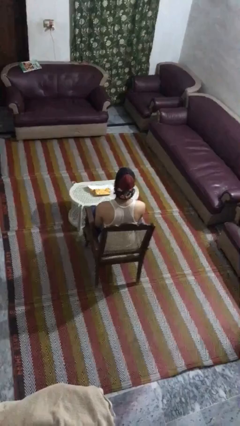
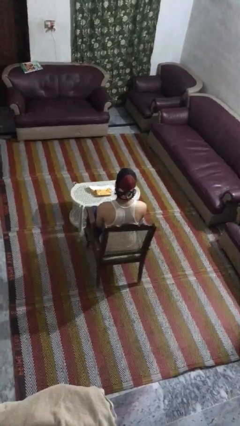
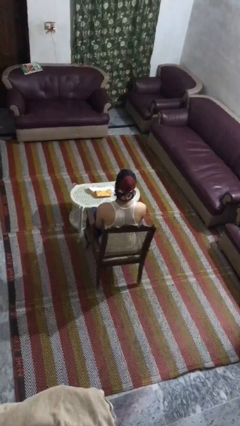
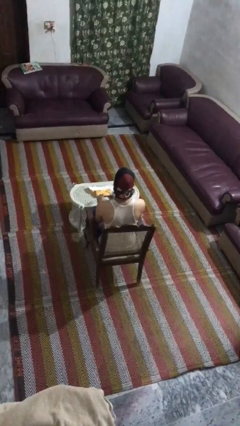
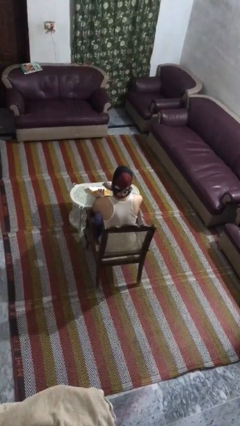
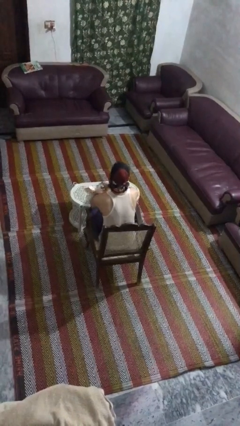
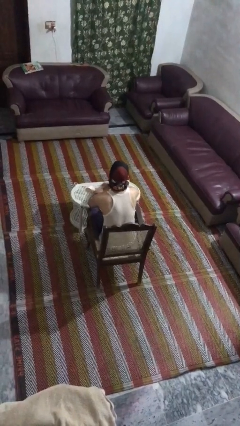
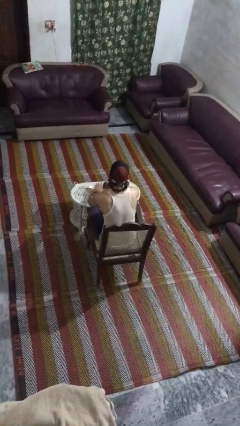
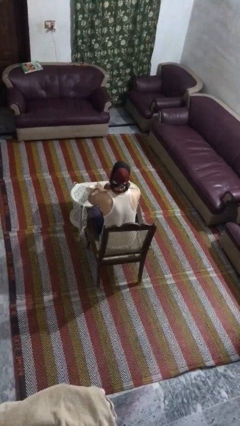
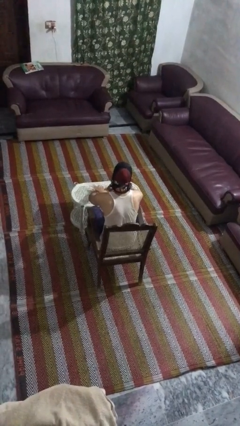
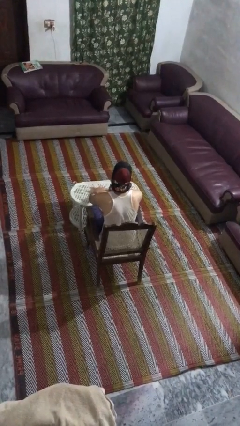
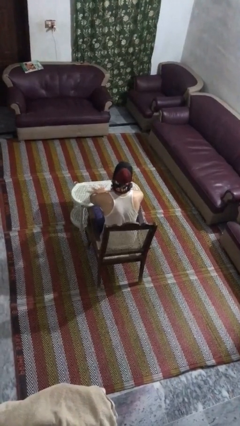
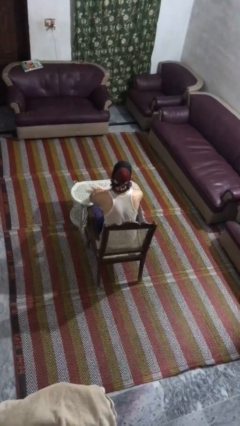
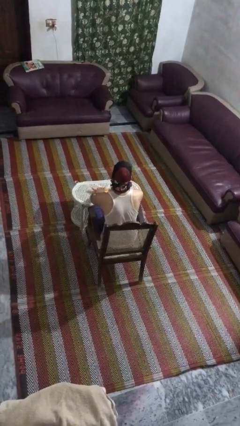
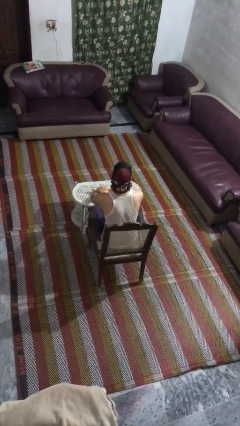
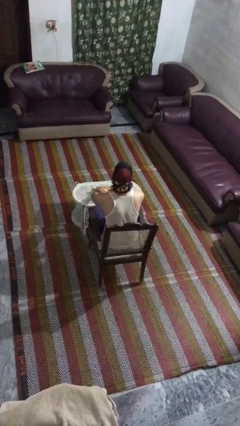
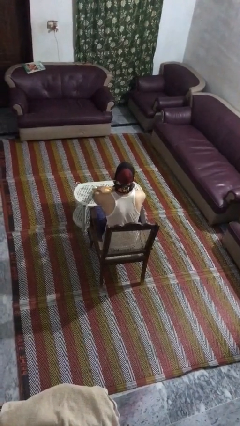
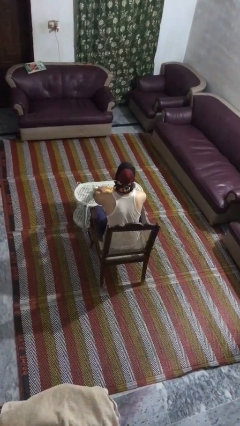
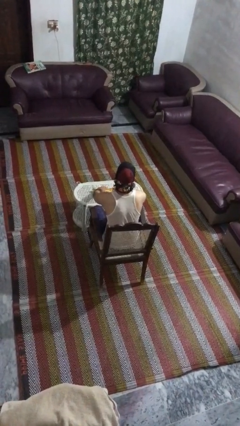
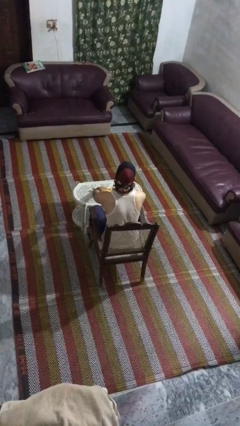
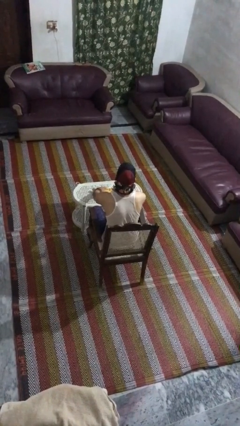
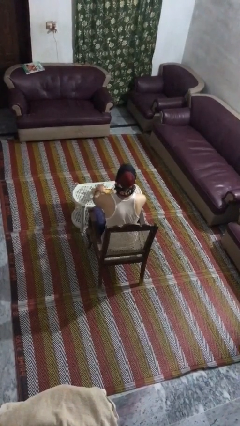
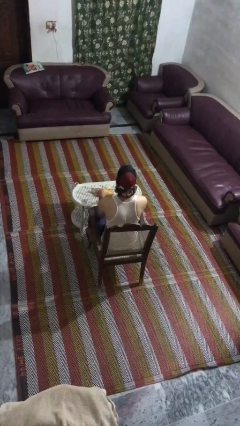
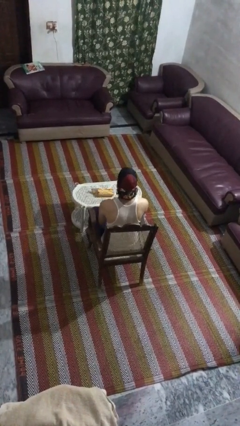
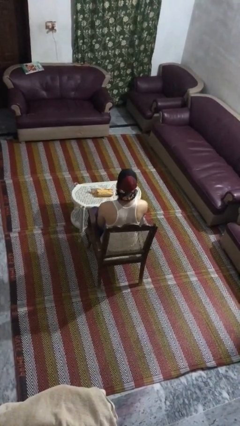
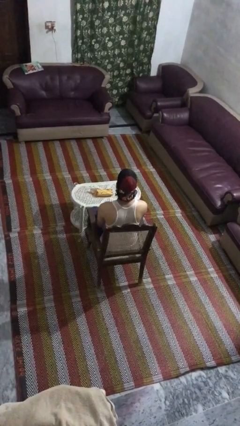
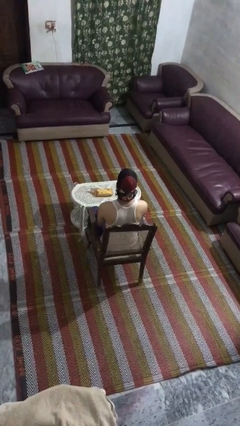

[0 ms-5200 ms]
person wraps box

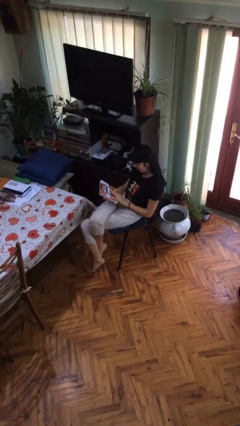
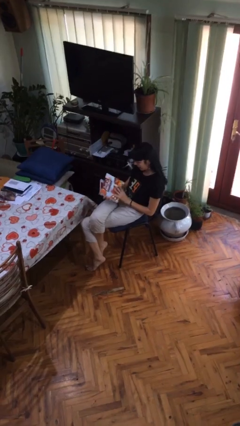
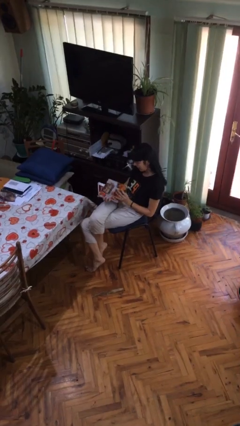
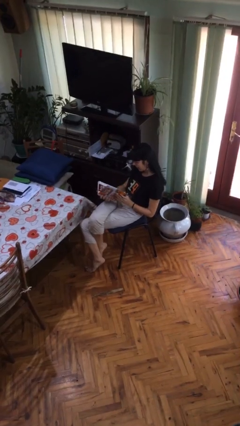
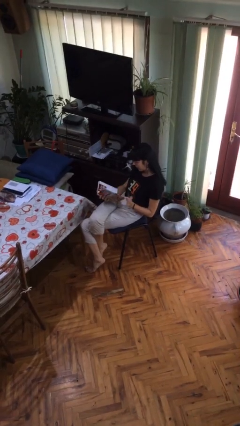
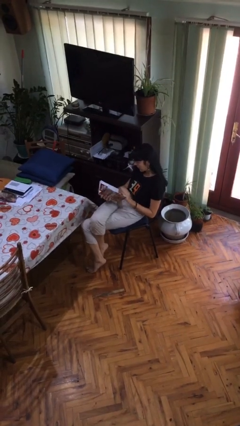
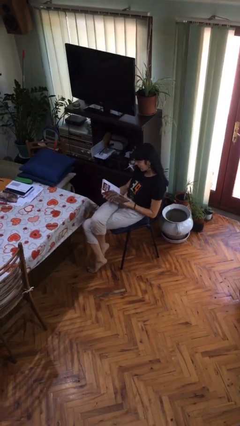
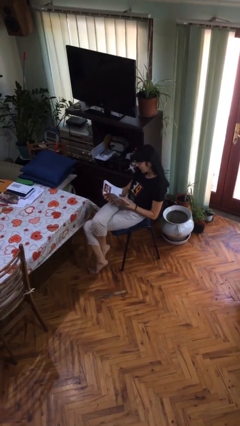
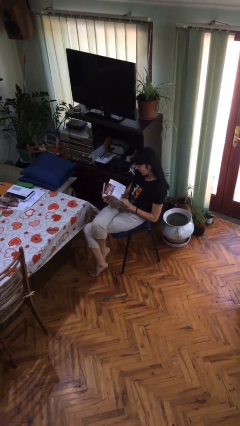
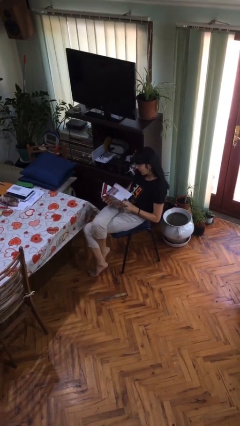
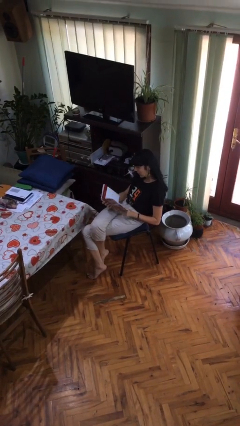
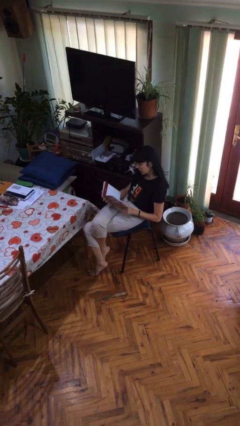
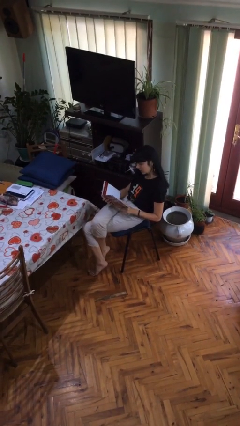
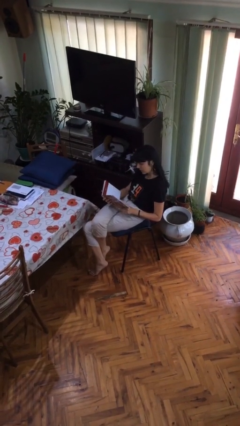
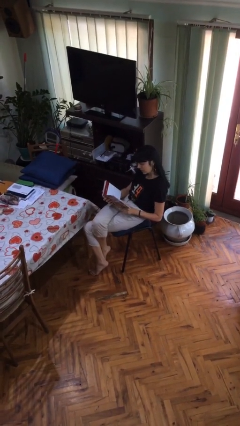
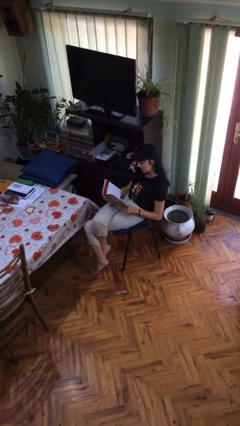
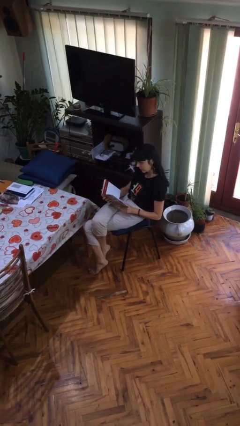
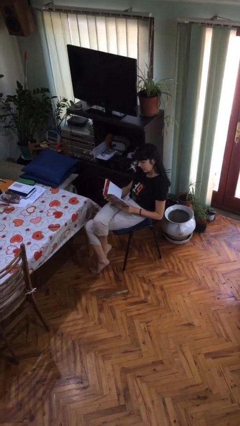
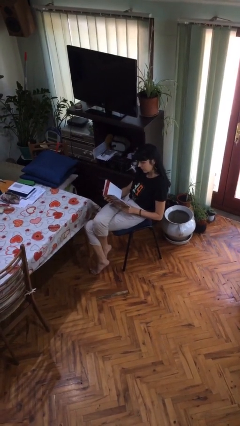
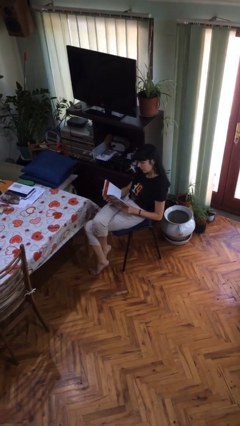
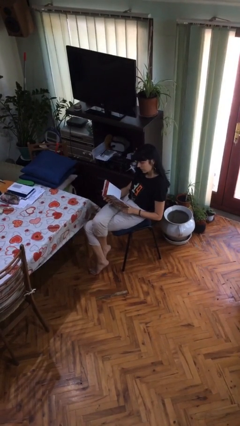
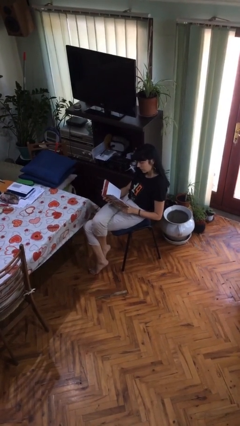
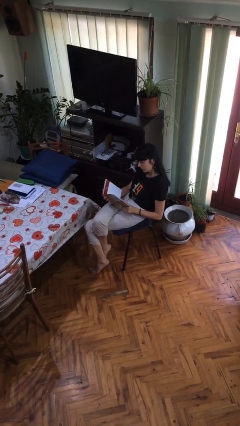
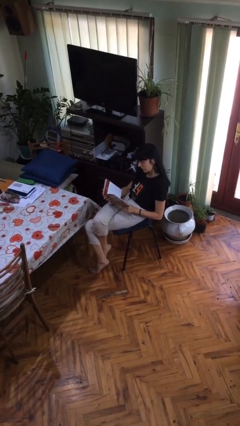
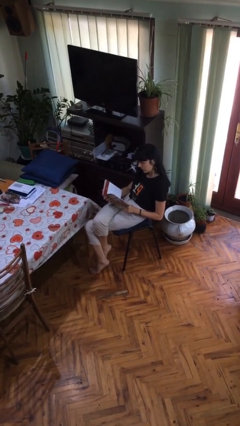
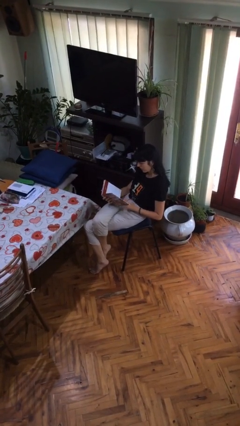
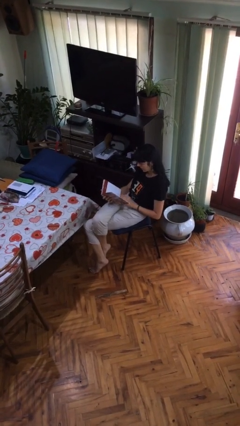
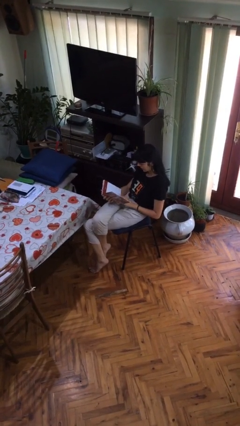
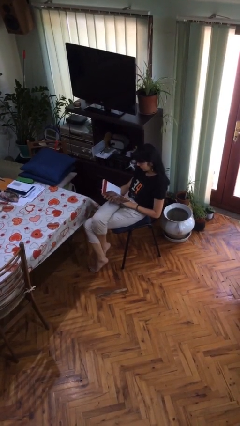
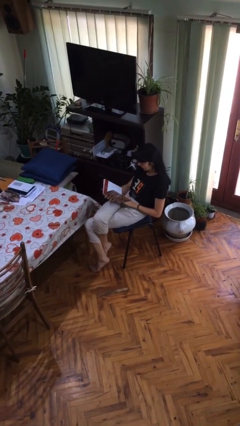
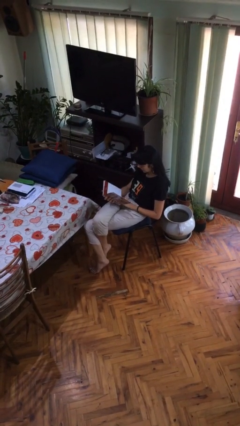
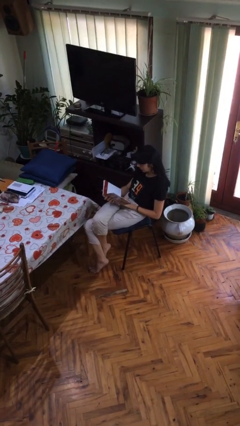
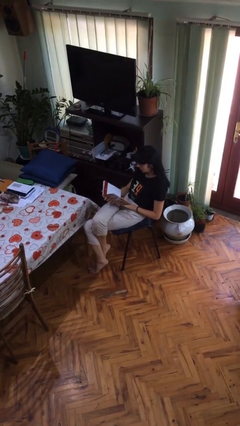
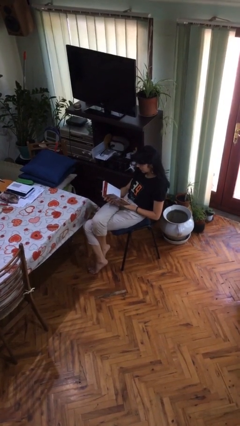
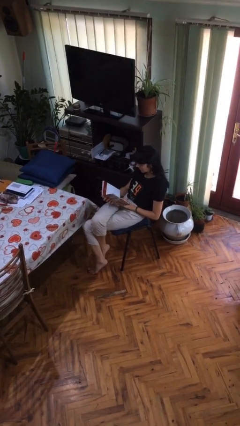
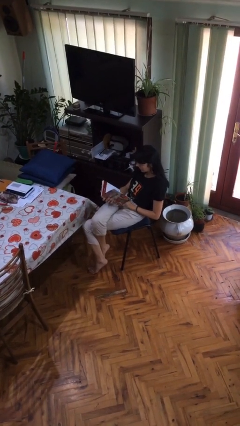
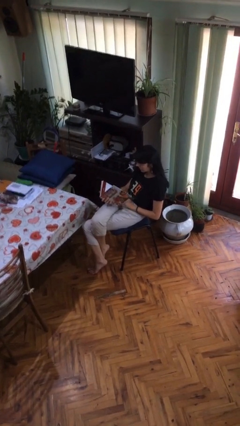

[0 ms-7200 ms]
person reads document

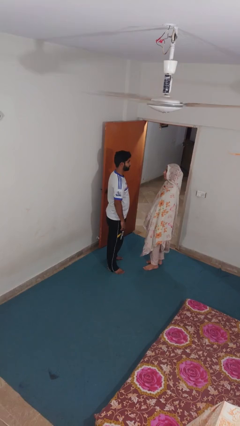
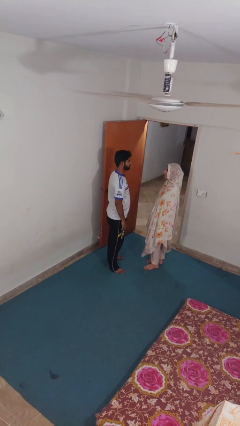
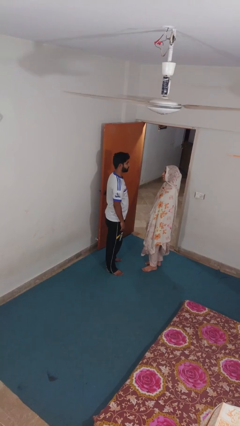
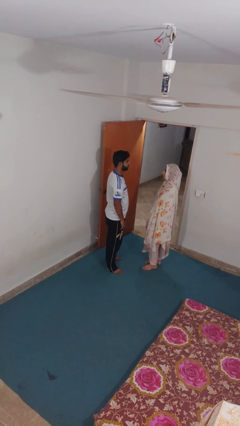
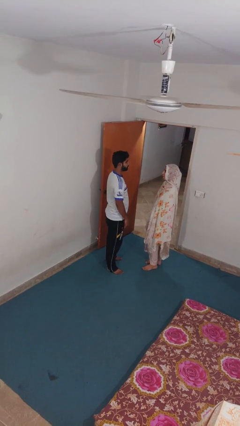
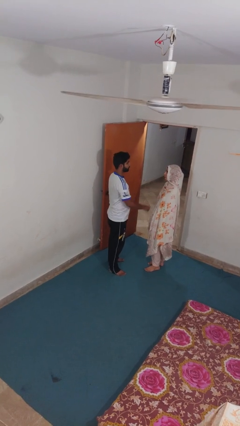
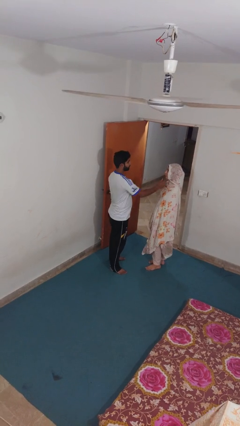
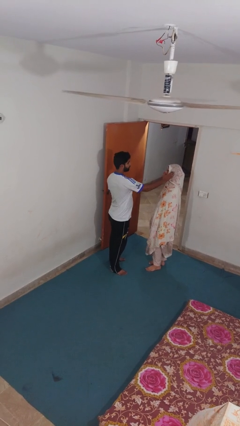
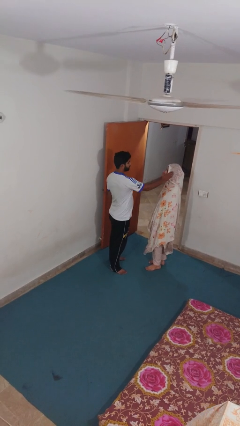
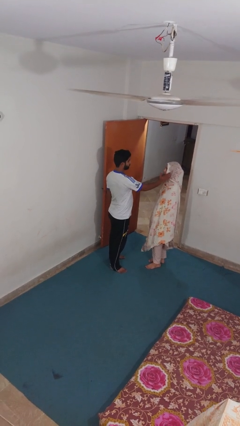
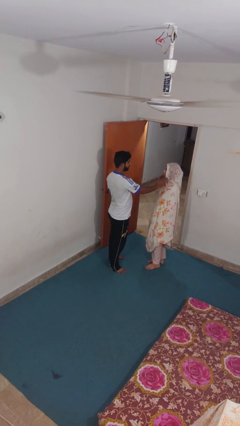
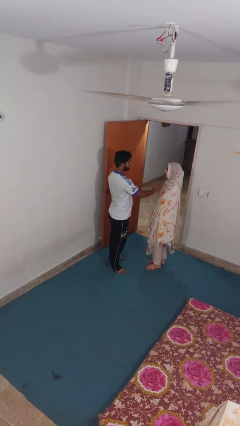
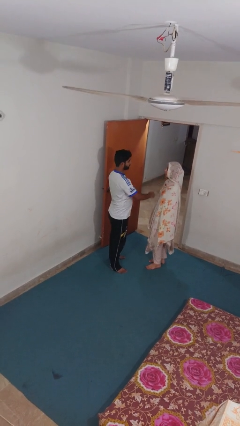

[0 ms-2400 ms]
person touches face of person

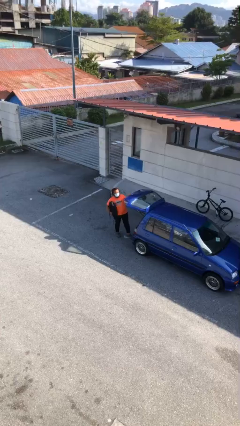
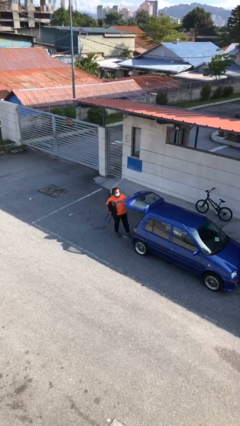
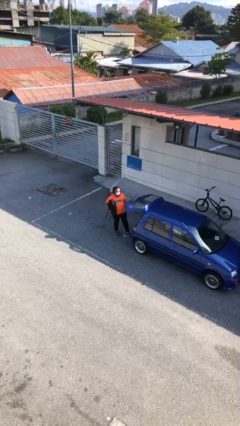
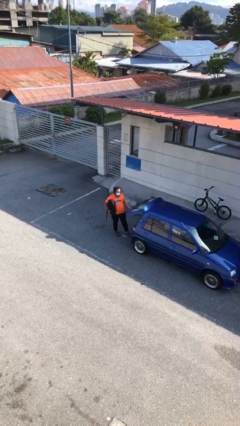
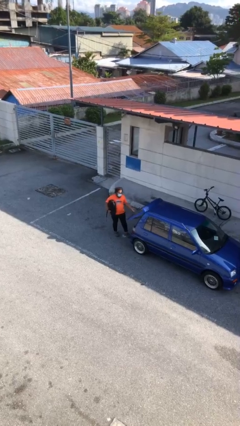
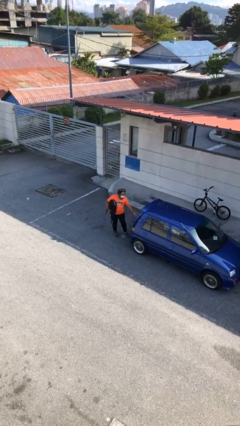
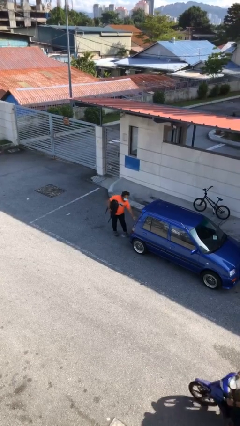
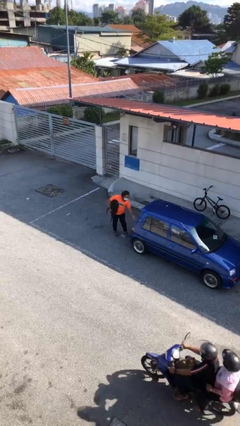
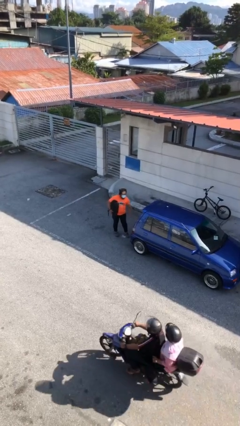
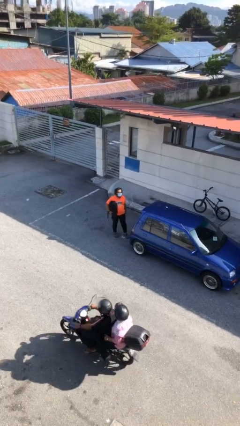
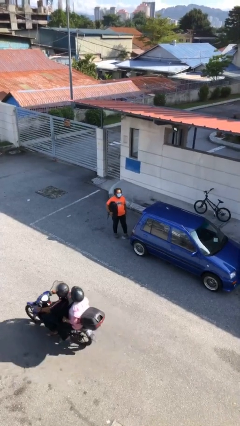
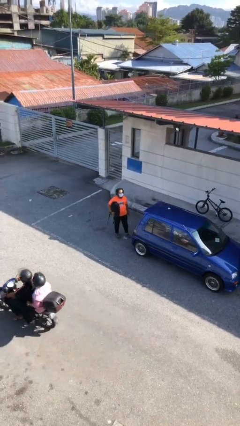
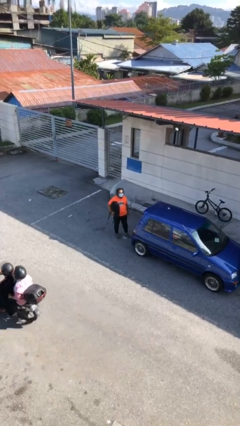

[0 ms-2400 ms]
person closes car trunk

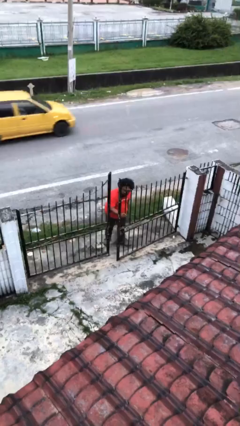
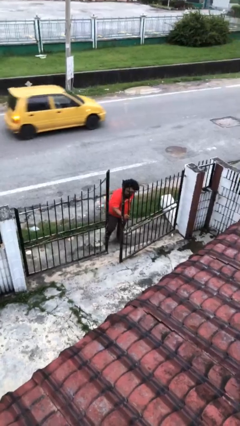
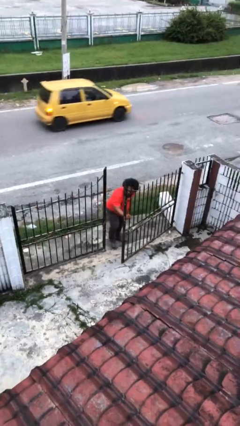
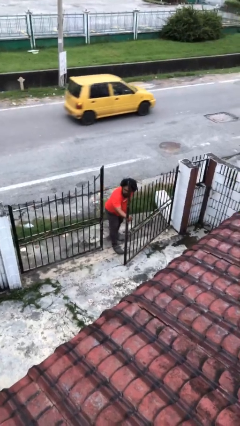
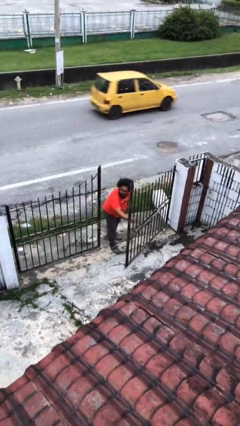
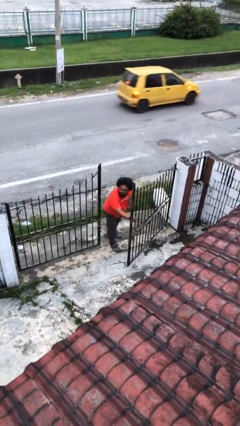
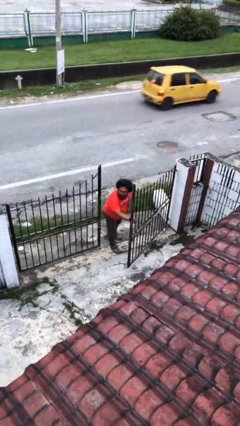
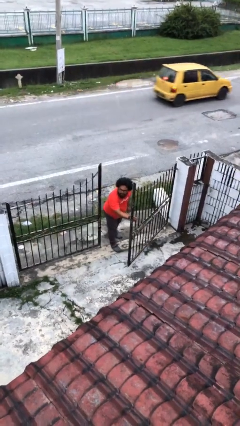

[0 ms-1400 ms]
person opens facility door
